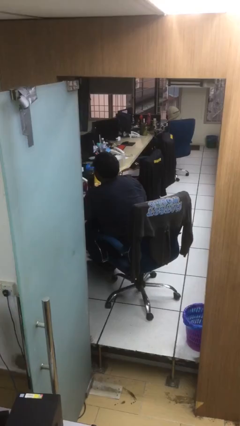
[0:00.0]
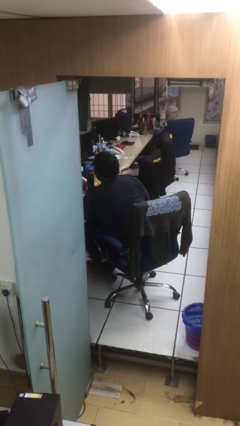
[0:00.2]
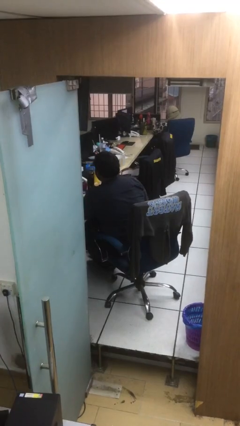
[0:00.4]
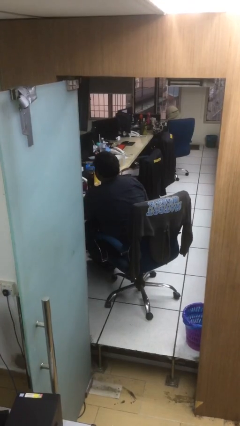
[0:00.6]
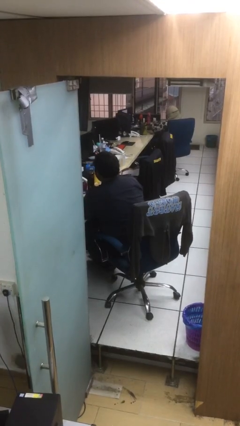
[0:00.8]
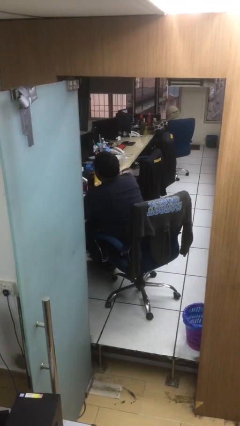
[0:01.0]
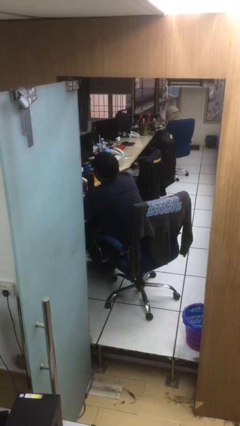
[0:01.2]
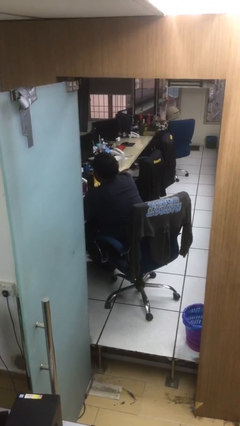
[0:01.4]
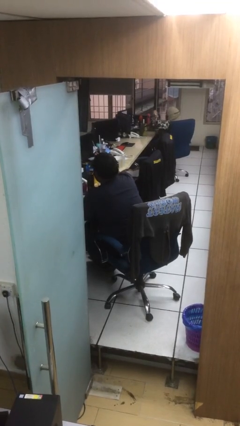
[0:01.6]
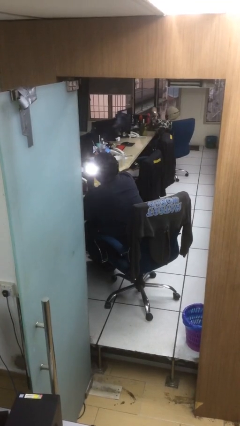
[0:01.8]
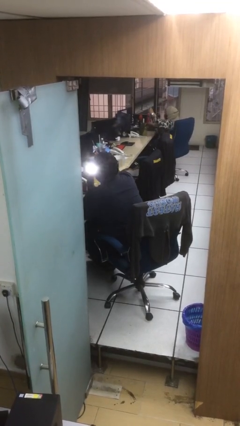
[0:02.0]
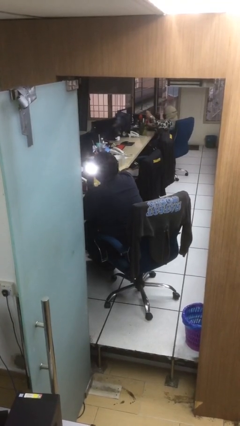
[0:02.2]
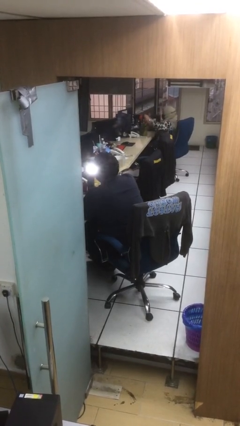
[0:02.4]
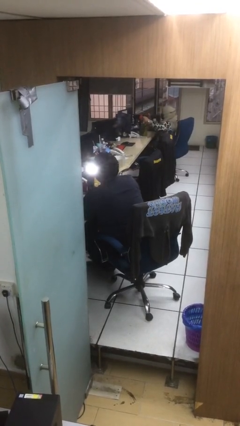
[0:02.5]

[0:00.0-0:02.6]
person turns on lamp

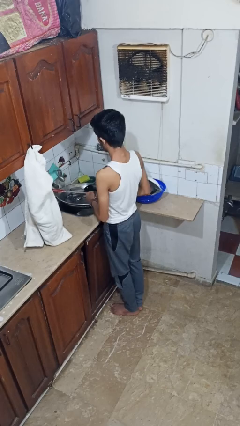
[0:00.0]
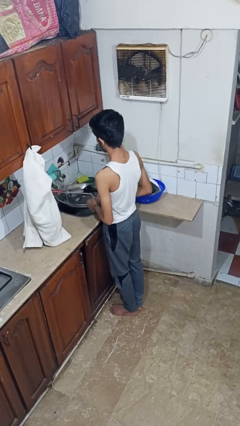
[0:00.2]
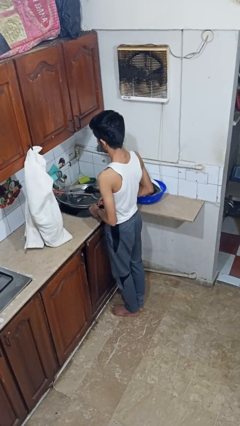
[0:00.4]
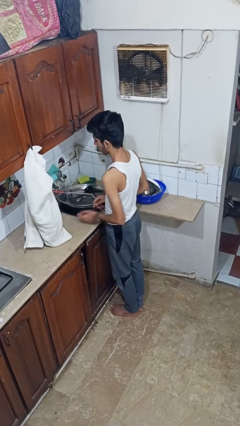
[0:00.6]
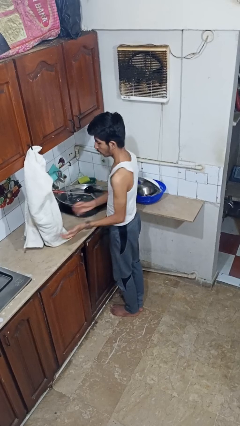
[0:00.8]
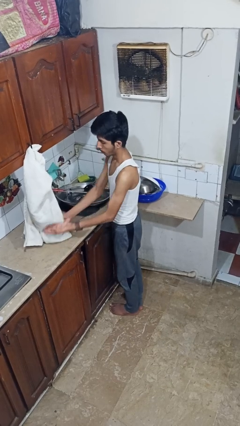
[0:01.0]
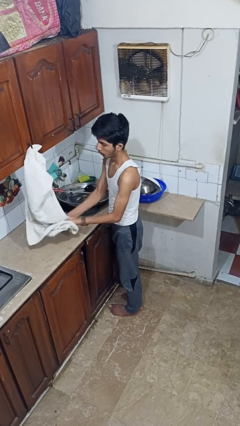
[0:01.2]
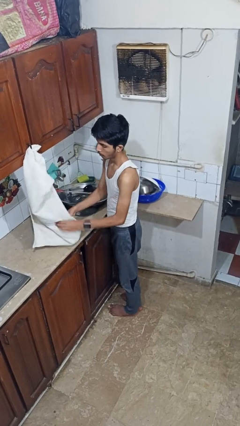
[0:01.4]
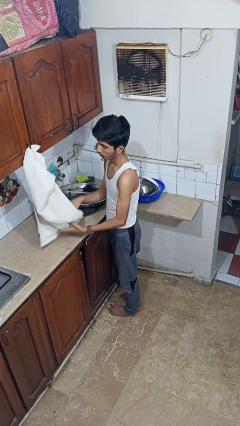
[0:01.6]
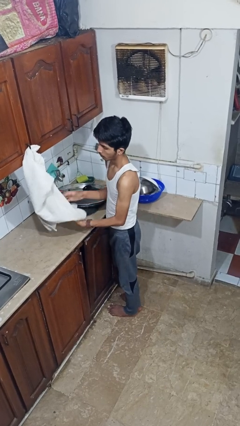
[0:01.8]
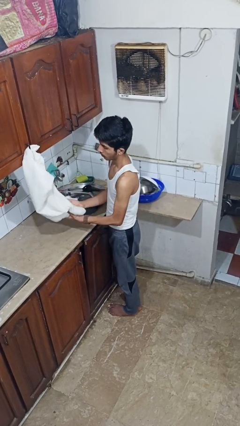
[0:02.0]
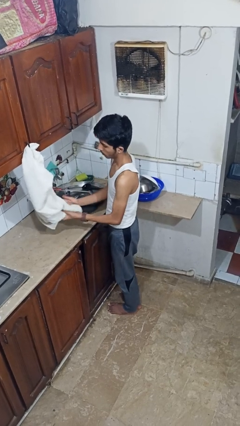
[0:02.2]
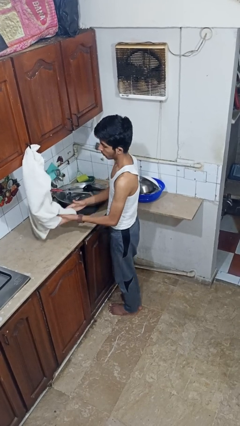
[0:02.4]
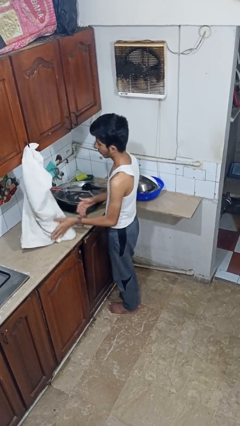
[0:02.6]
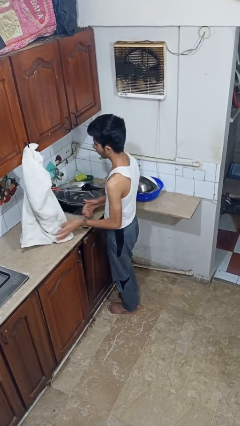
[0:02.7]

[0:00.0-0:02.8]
person dries hands with towel

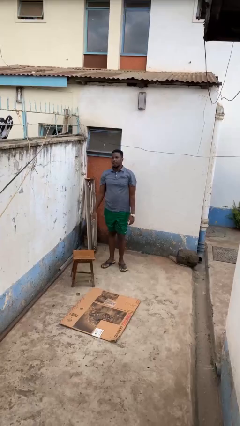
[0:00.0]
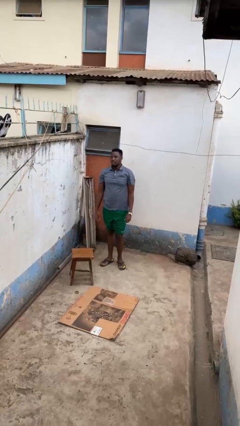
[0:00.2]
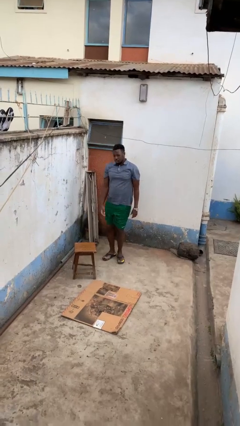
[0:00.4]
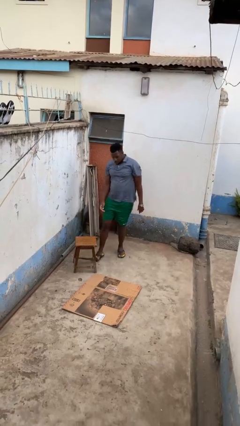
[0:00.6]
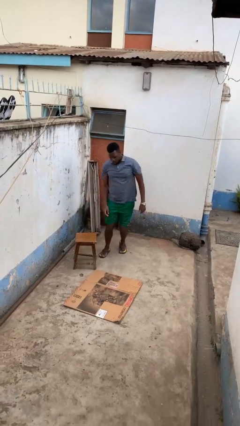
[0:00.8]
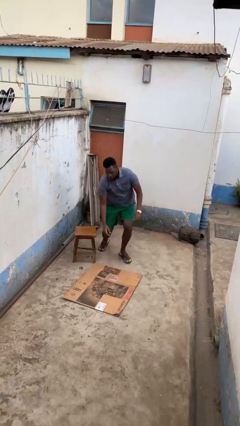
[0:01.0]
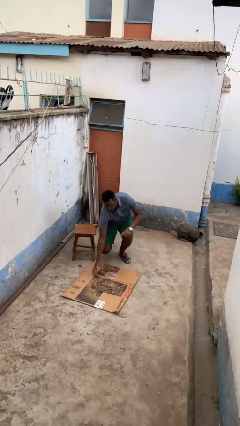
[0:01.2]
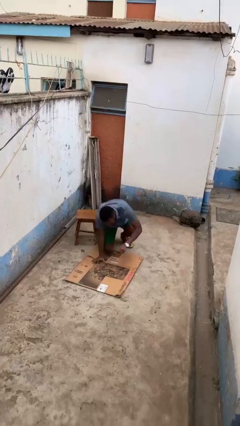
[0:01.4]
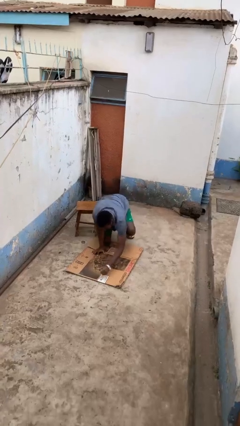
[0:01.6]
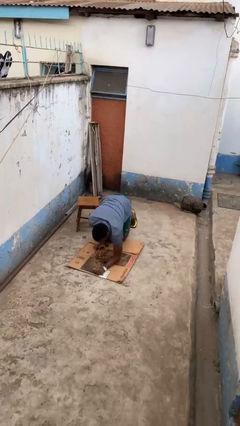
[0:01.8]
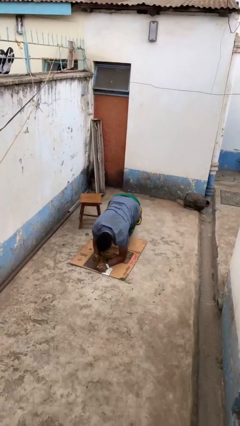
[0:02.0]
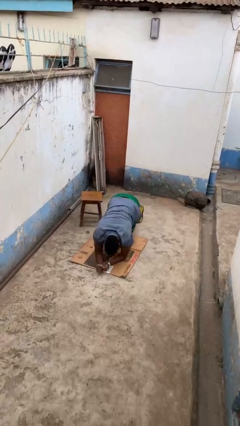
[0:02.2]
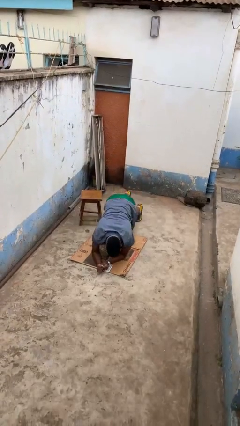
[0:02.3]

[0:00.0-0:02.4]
person trips on object on floor

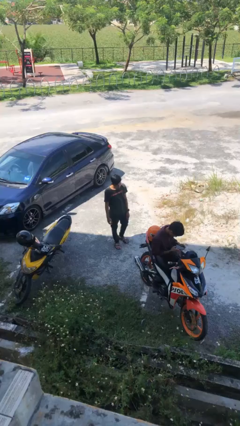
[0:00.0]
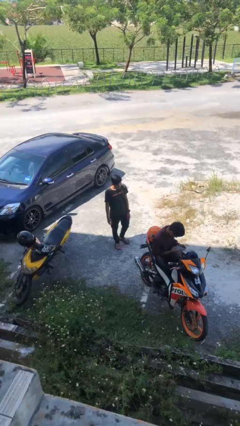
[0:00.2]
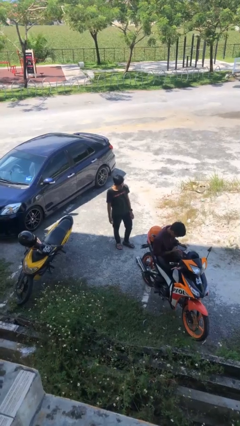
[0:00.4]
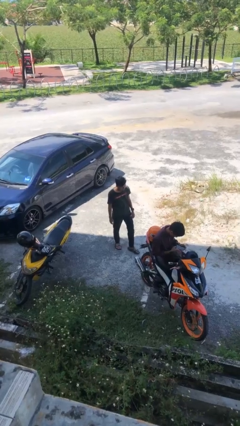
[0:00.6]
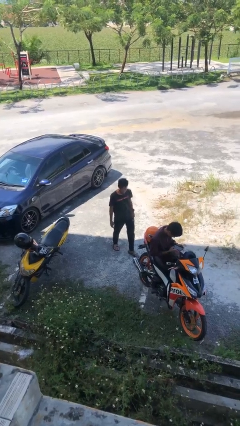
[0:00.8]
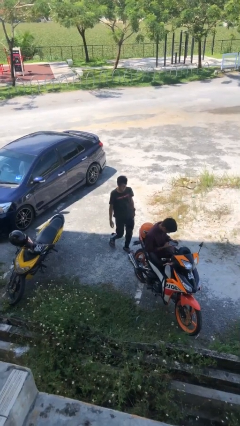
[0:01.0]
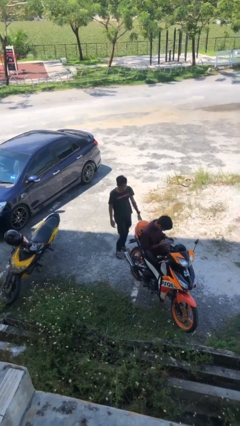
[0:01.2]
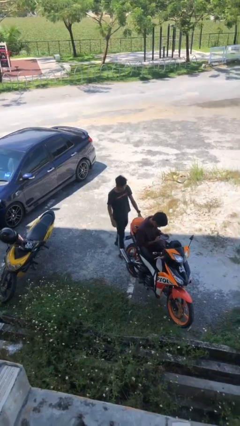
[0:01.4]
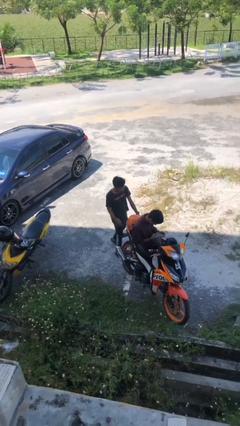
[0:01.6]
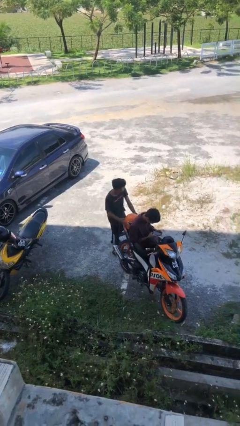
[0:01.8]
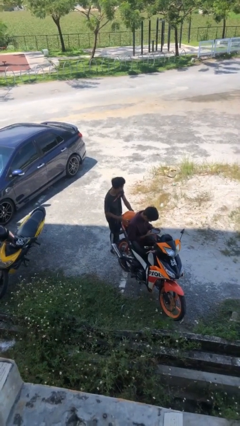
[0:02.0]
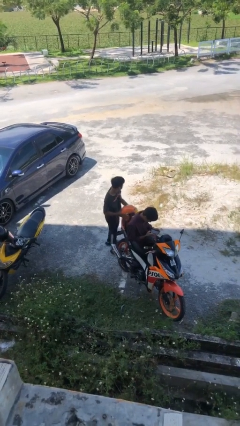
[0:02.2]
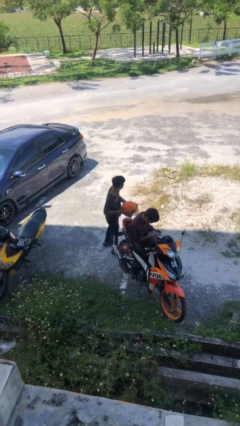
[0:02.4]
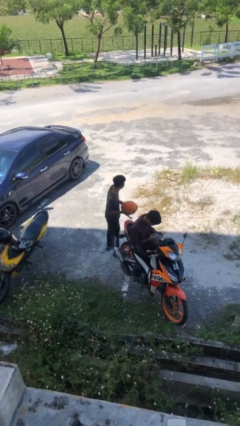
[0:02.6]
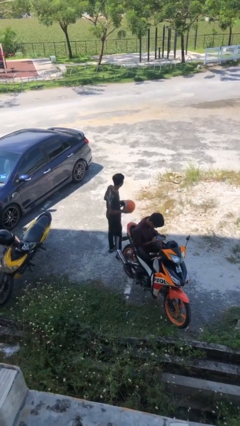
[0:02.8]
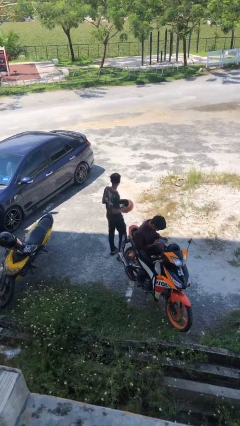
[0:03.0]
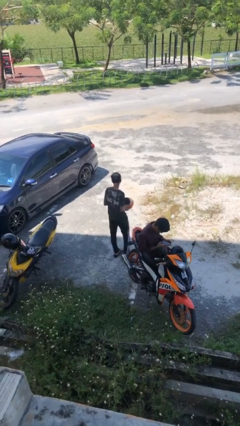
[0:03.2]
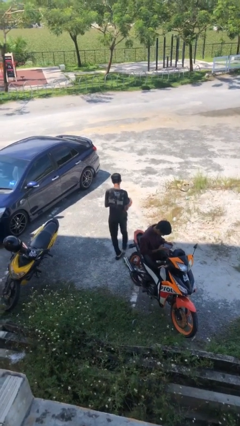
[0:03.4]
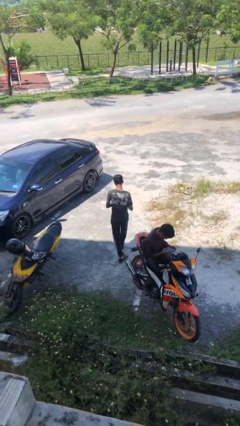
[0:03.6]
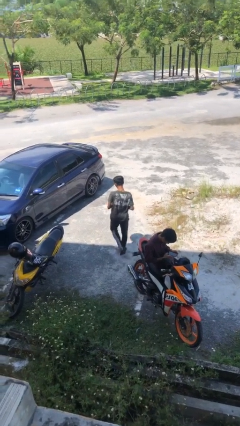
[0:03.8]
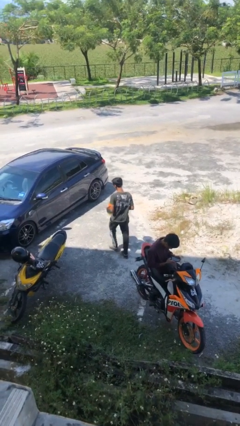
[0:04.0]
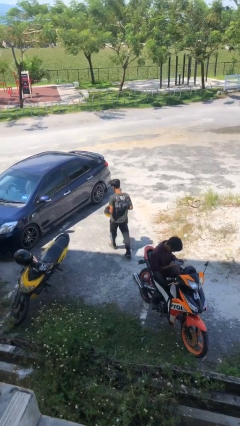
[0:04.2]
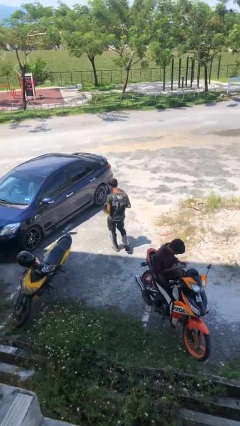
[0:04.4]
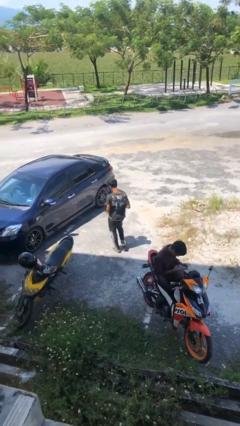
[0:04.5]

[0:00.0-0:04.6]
person steals object from person

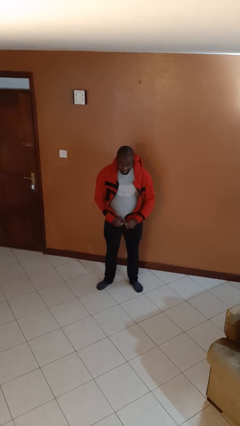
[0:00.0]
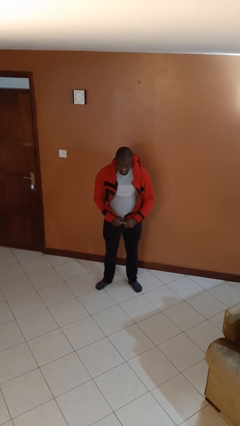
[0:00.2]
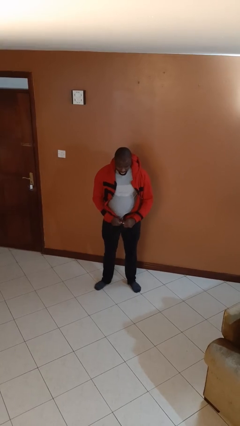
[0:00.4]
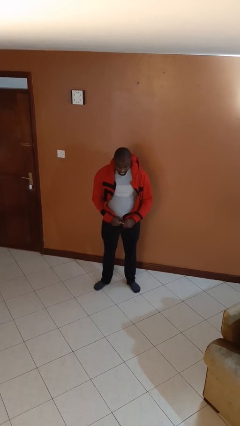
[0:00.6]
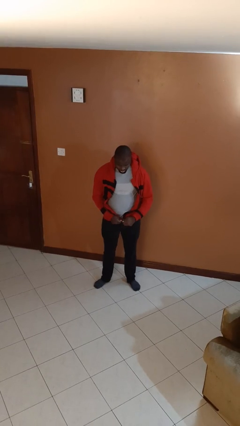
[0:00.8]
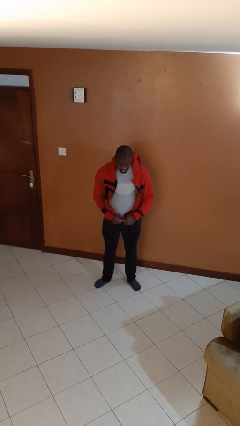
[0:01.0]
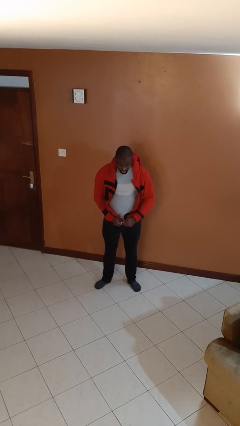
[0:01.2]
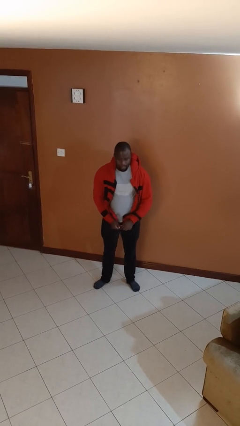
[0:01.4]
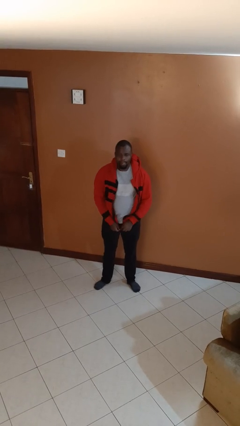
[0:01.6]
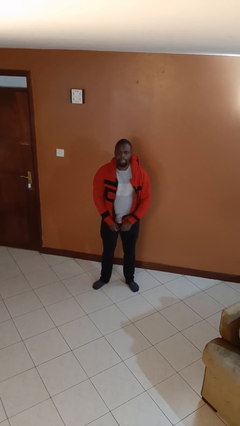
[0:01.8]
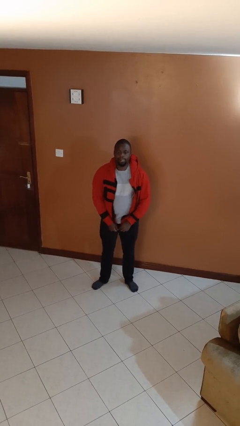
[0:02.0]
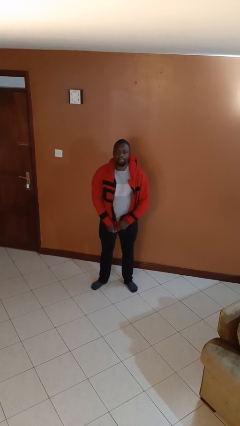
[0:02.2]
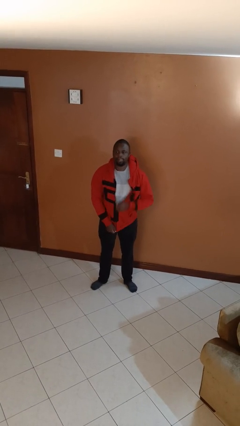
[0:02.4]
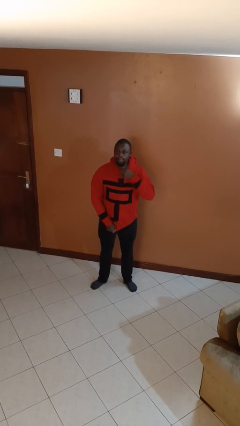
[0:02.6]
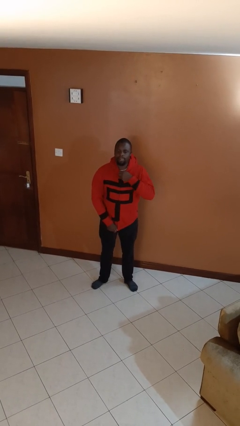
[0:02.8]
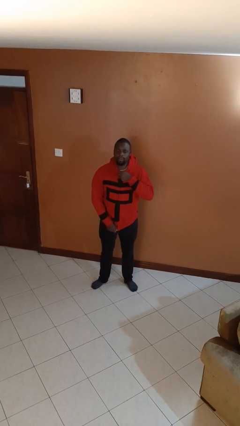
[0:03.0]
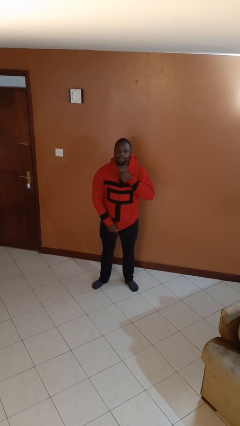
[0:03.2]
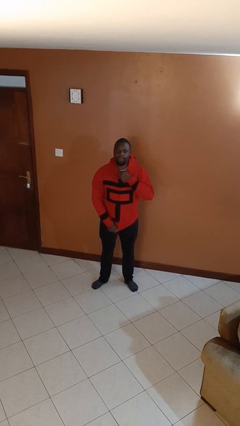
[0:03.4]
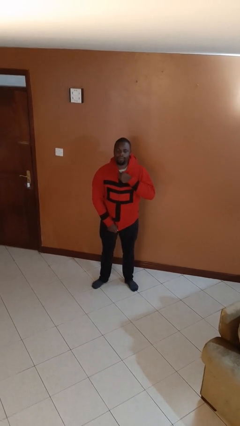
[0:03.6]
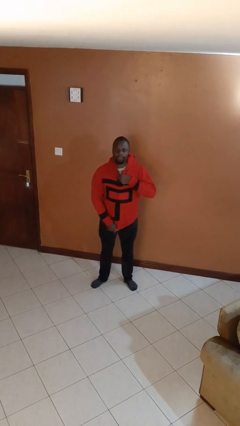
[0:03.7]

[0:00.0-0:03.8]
person zips up jacket

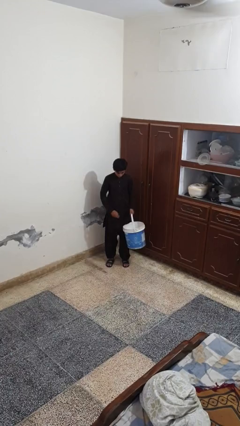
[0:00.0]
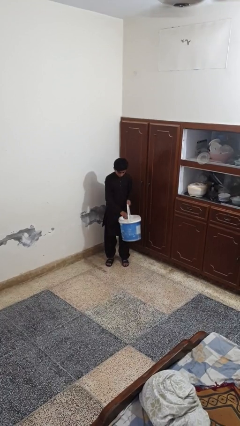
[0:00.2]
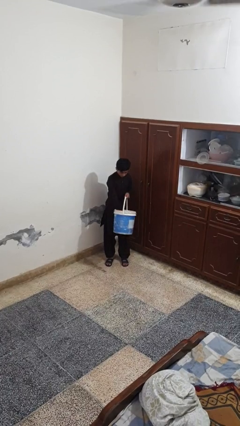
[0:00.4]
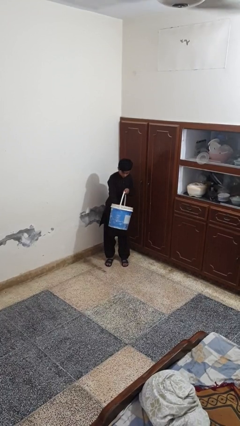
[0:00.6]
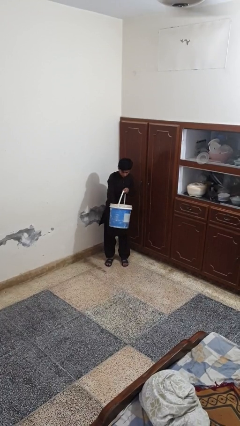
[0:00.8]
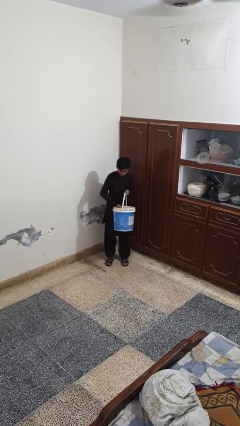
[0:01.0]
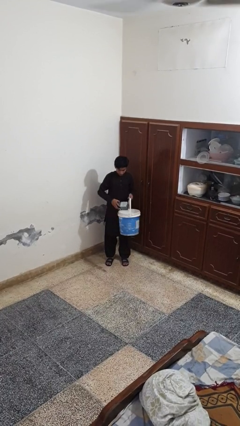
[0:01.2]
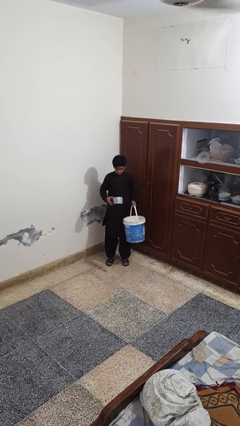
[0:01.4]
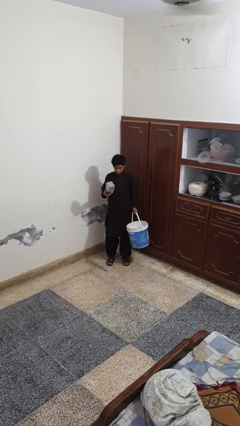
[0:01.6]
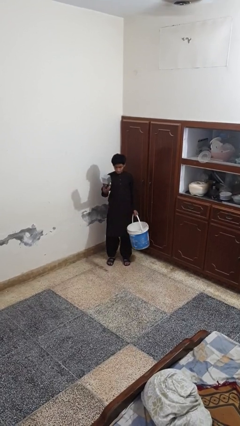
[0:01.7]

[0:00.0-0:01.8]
person takes object from basket
